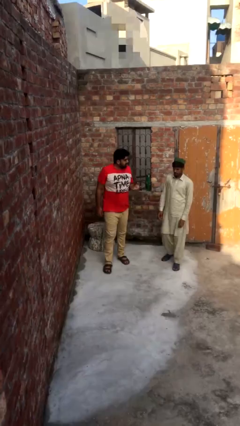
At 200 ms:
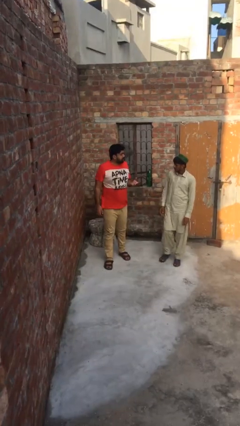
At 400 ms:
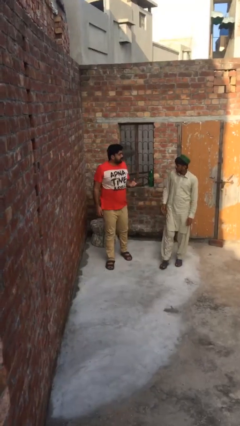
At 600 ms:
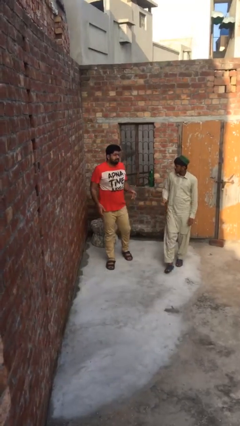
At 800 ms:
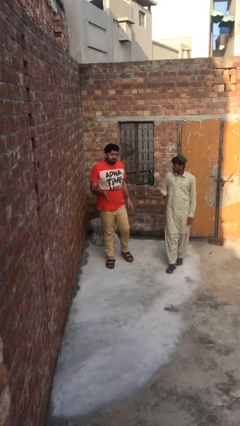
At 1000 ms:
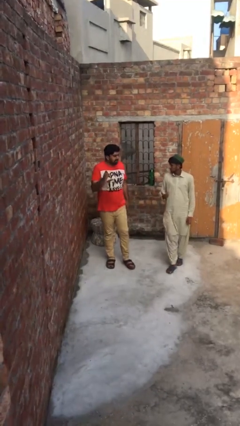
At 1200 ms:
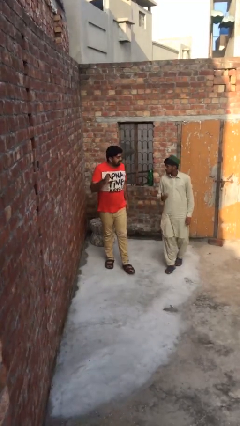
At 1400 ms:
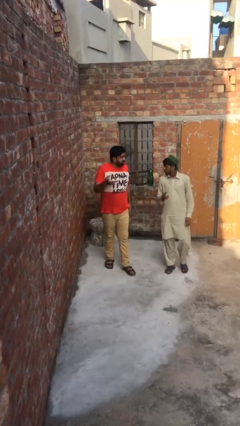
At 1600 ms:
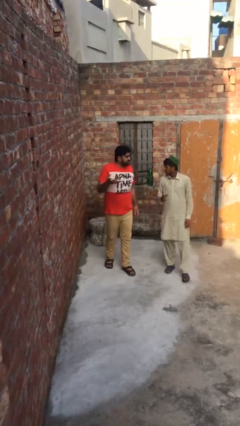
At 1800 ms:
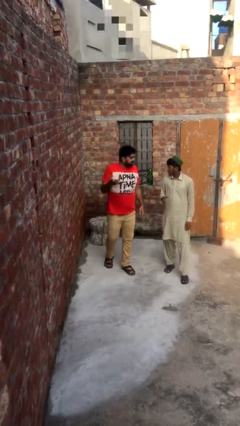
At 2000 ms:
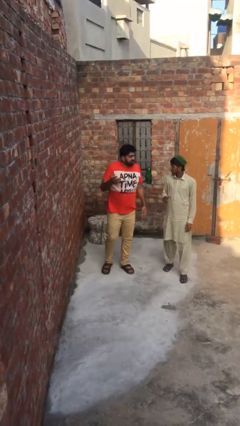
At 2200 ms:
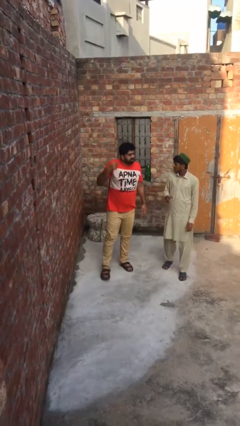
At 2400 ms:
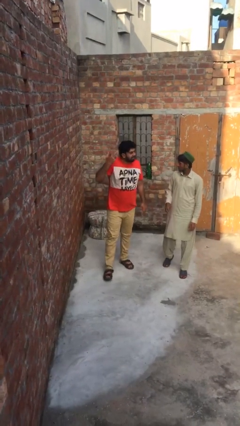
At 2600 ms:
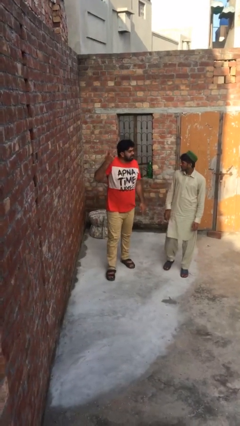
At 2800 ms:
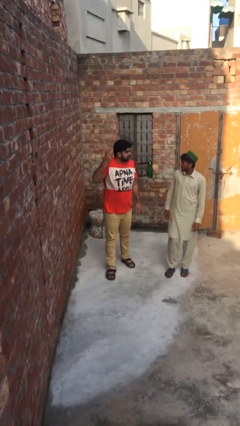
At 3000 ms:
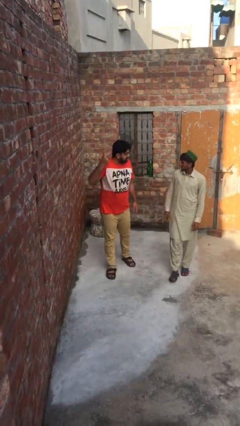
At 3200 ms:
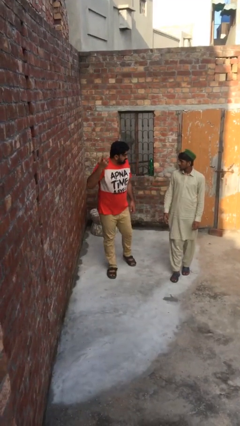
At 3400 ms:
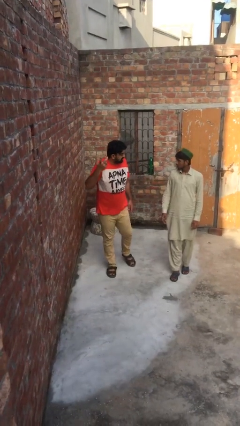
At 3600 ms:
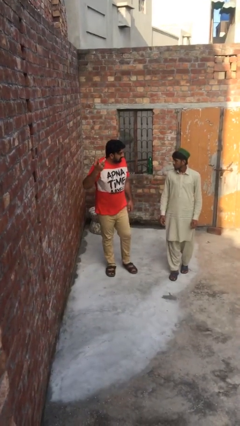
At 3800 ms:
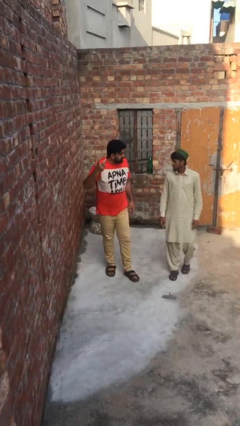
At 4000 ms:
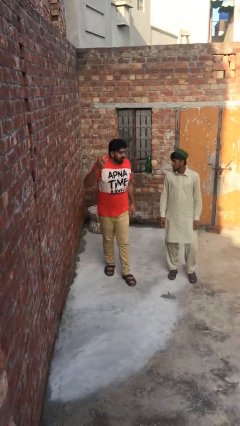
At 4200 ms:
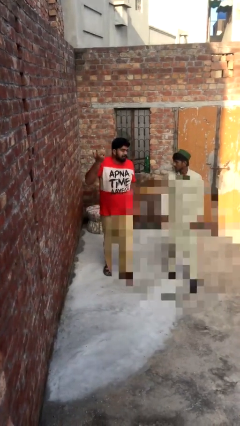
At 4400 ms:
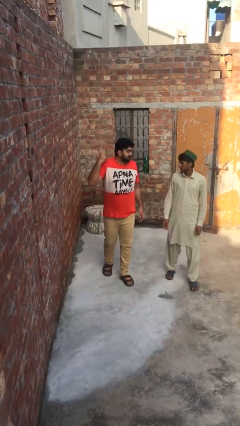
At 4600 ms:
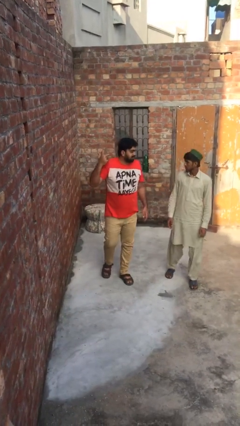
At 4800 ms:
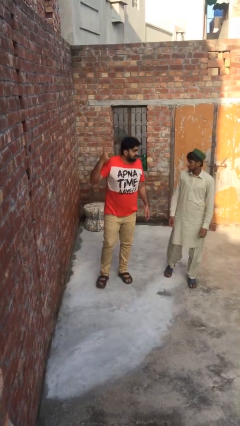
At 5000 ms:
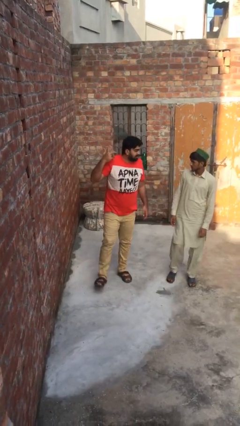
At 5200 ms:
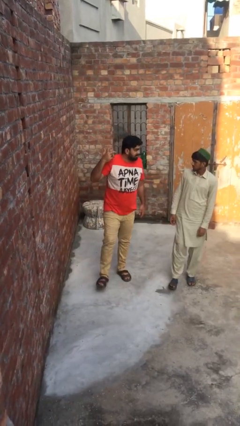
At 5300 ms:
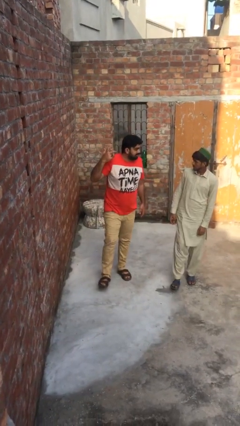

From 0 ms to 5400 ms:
person talks to person

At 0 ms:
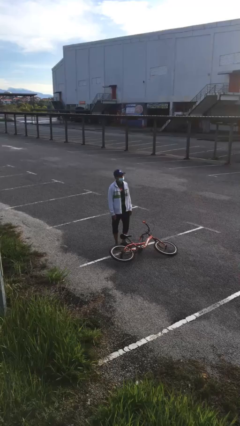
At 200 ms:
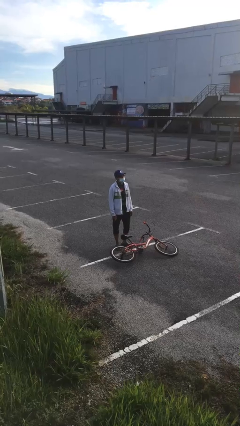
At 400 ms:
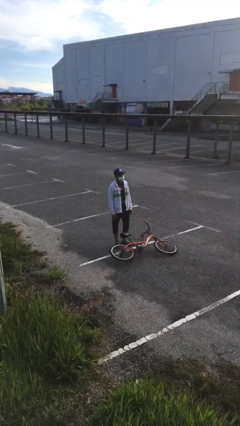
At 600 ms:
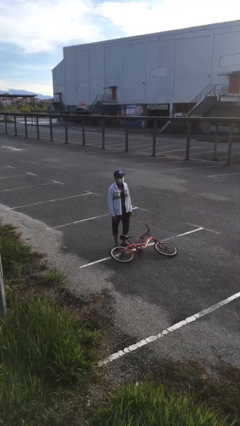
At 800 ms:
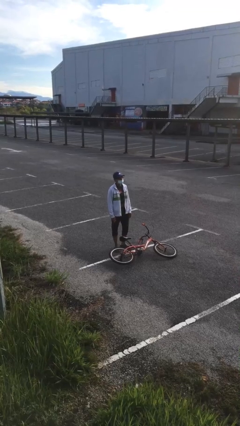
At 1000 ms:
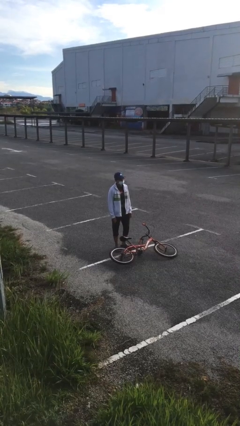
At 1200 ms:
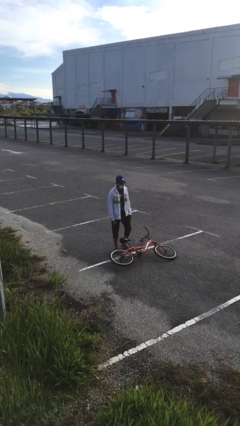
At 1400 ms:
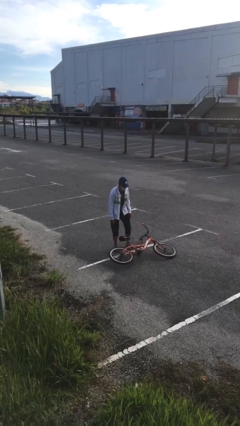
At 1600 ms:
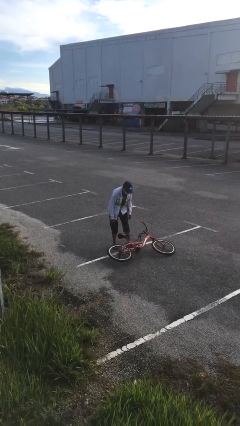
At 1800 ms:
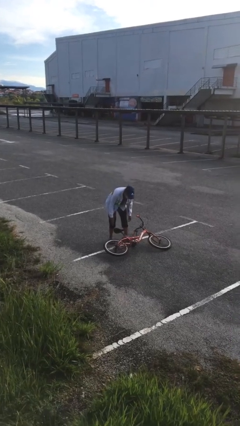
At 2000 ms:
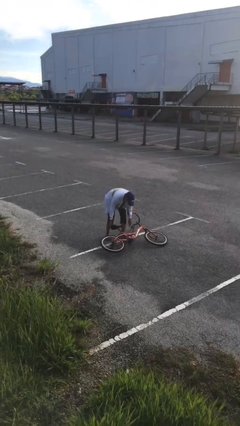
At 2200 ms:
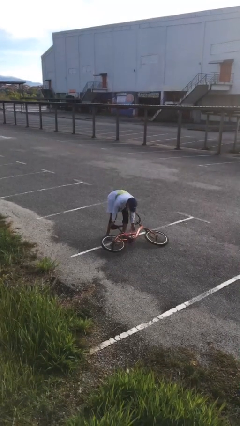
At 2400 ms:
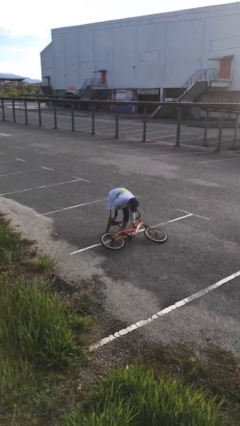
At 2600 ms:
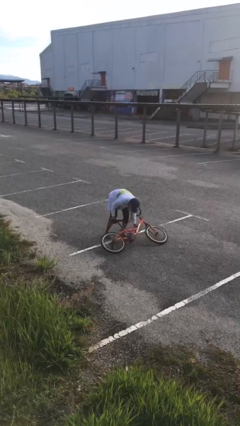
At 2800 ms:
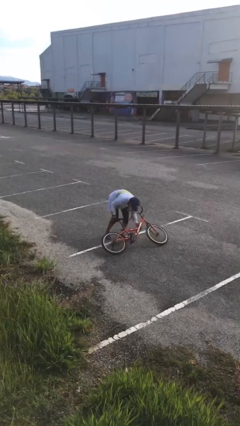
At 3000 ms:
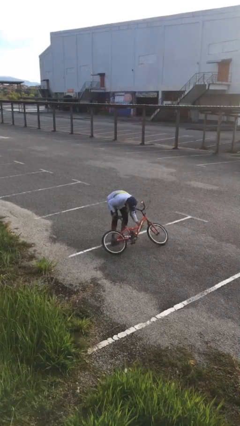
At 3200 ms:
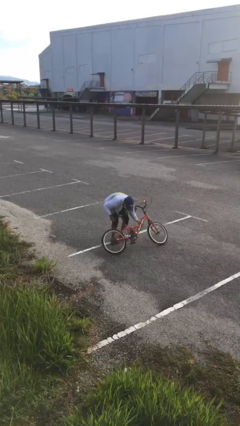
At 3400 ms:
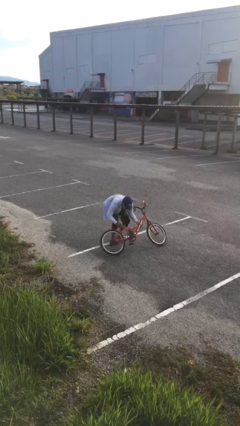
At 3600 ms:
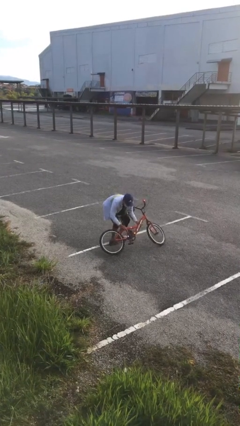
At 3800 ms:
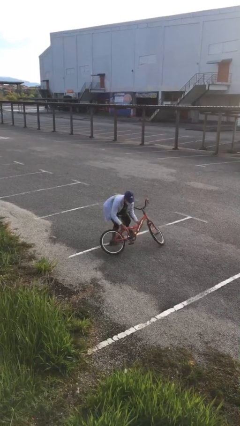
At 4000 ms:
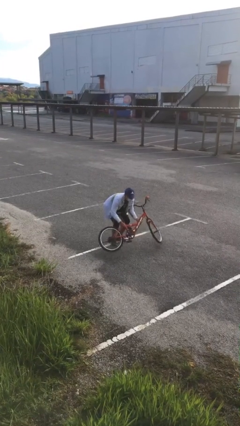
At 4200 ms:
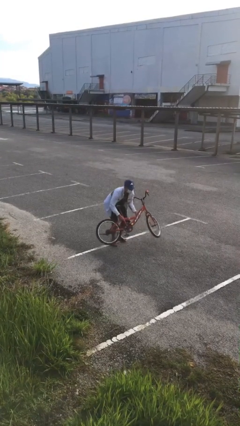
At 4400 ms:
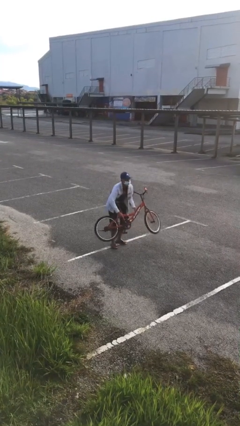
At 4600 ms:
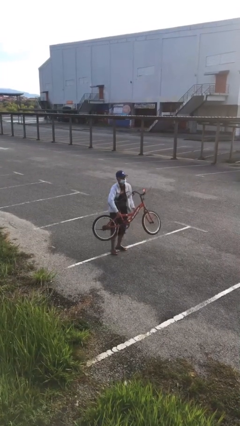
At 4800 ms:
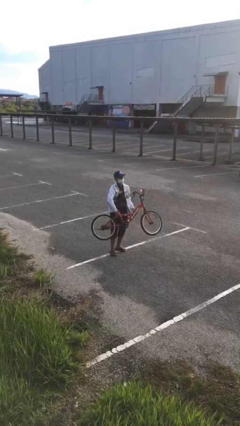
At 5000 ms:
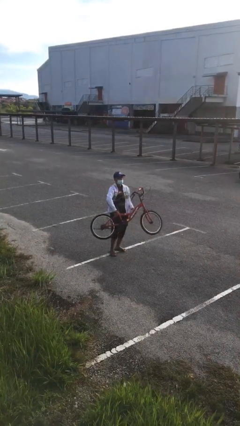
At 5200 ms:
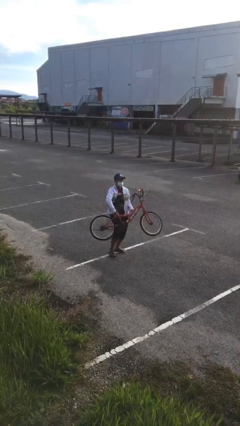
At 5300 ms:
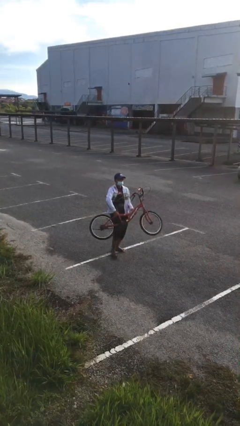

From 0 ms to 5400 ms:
person picks up object from floor

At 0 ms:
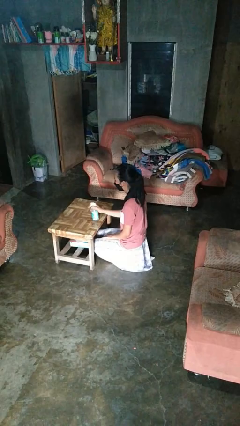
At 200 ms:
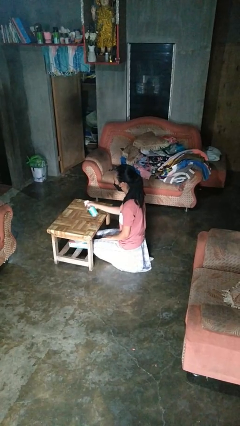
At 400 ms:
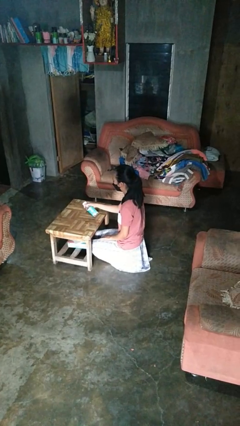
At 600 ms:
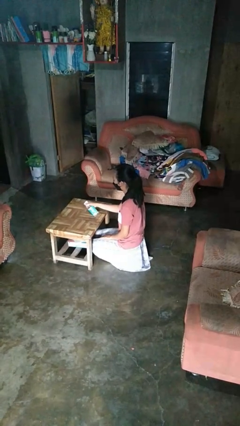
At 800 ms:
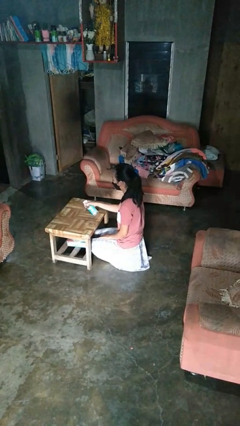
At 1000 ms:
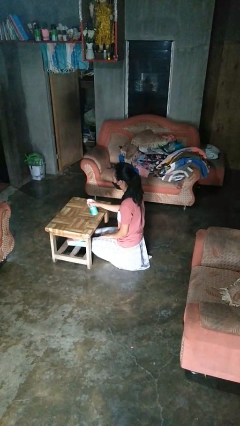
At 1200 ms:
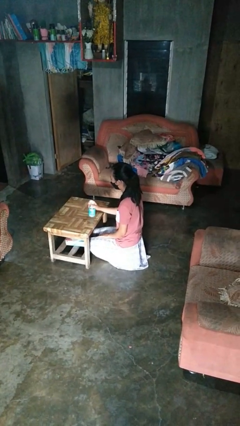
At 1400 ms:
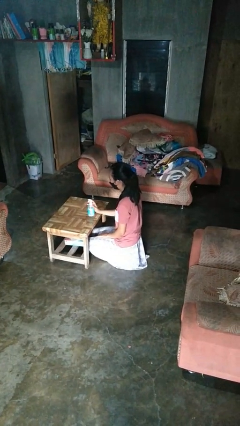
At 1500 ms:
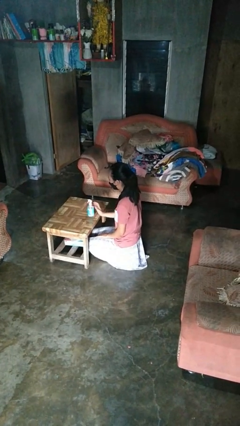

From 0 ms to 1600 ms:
person sprays from bottle

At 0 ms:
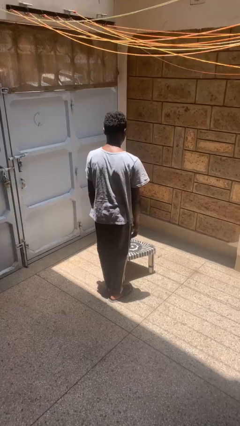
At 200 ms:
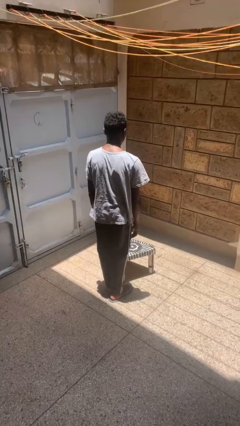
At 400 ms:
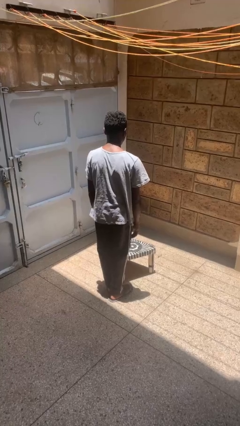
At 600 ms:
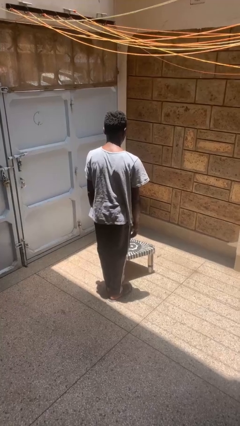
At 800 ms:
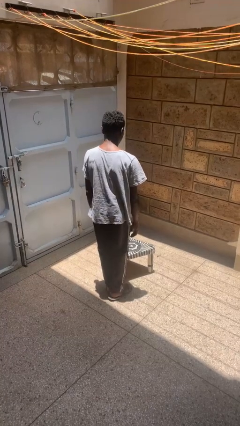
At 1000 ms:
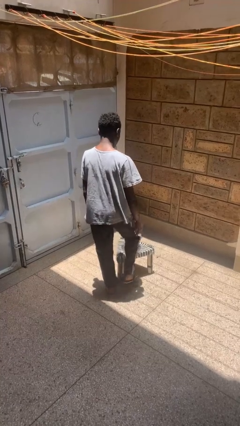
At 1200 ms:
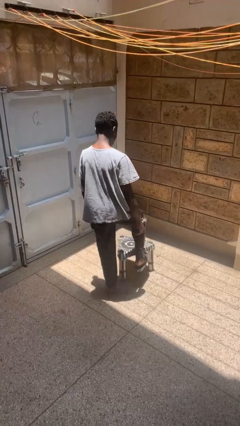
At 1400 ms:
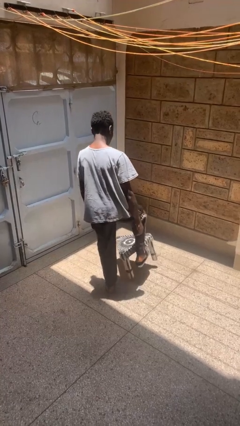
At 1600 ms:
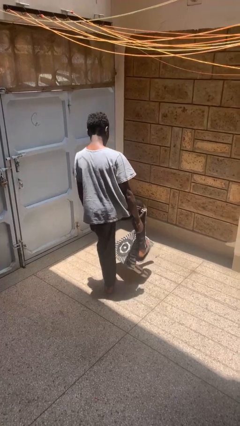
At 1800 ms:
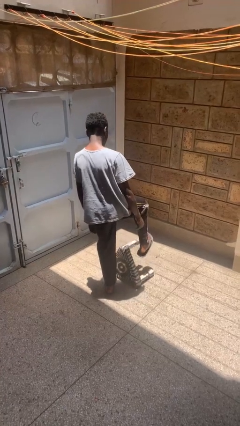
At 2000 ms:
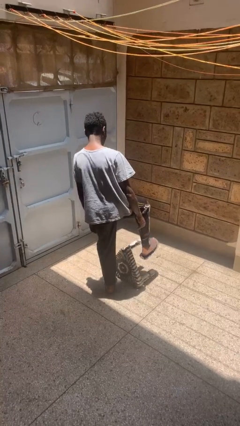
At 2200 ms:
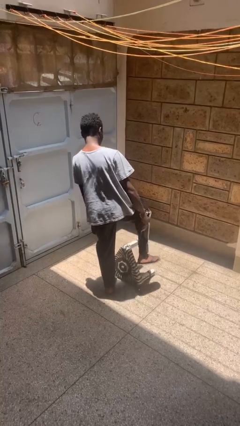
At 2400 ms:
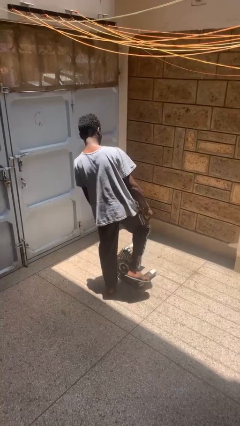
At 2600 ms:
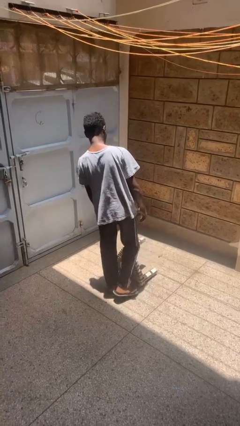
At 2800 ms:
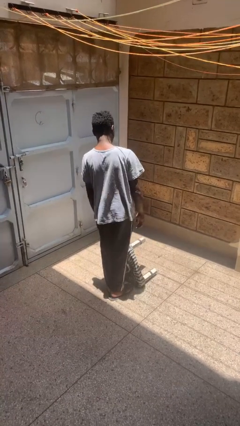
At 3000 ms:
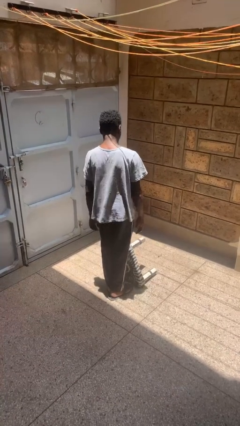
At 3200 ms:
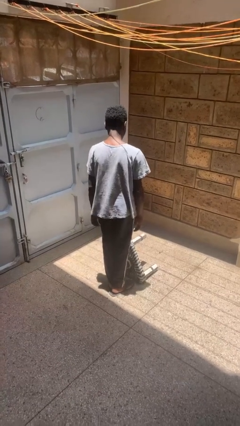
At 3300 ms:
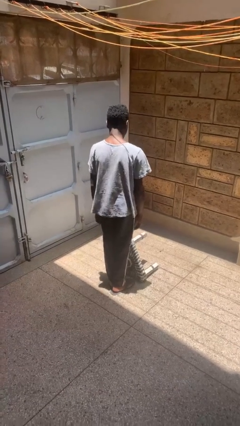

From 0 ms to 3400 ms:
person knocks over furniture

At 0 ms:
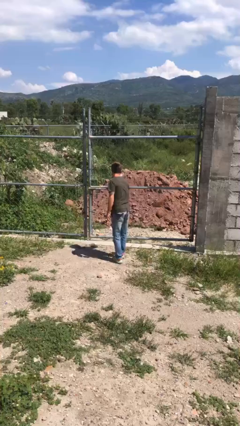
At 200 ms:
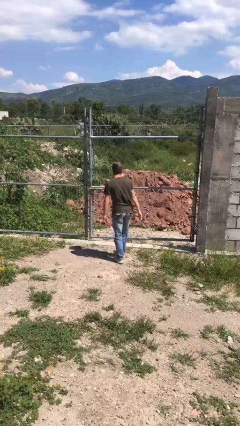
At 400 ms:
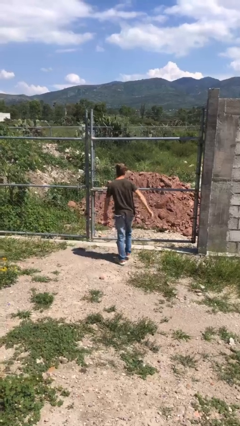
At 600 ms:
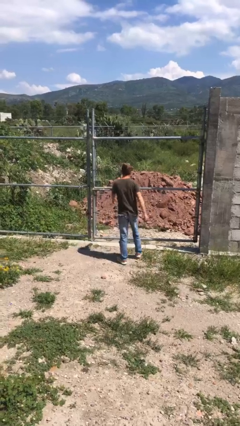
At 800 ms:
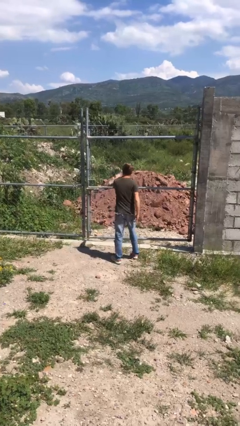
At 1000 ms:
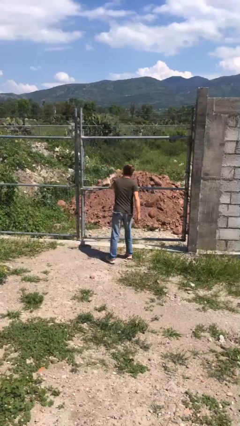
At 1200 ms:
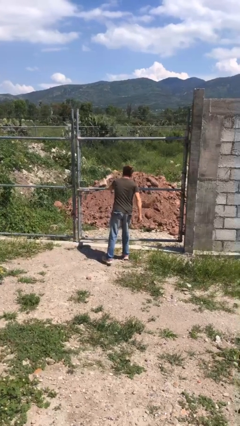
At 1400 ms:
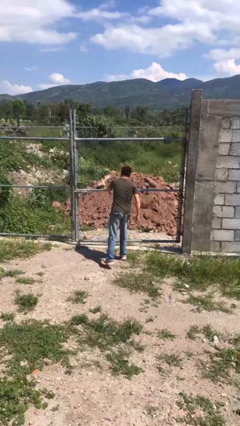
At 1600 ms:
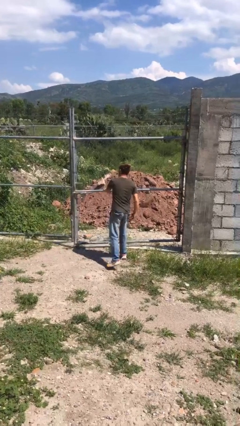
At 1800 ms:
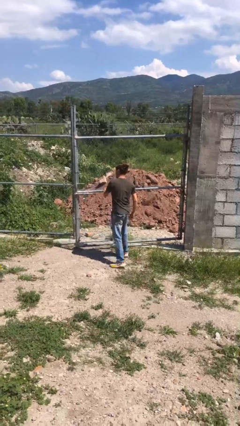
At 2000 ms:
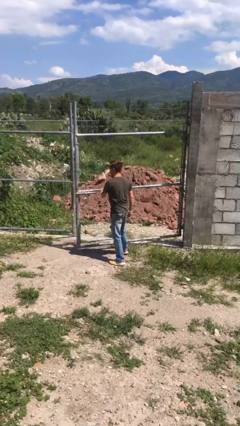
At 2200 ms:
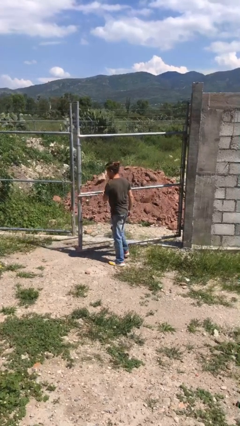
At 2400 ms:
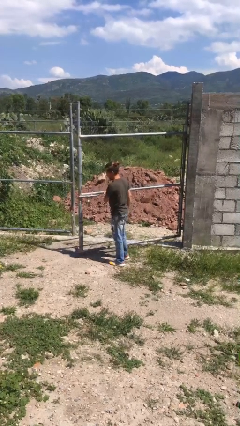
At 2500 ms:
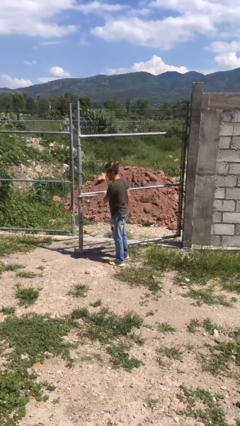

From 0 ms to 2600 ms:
person opens gate
